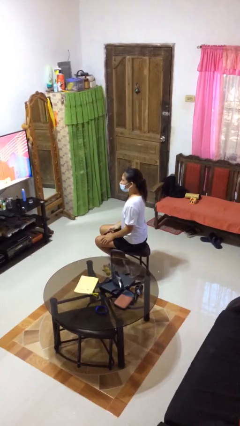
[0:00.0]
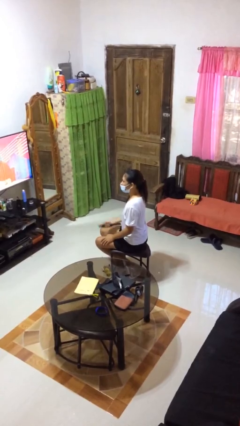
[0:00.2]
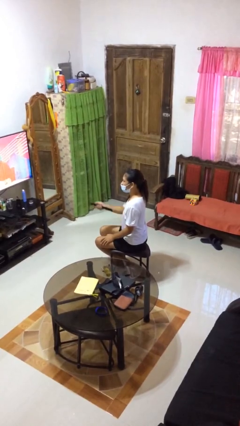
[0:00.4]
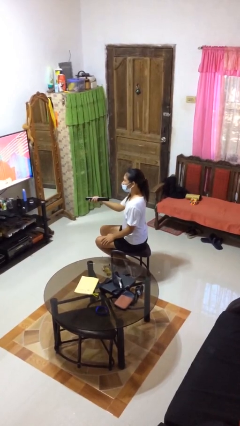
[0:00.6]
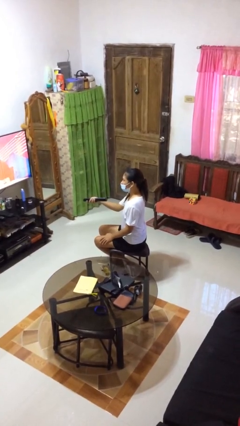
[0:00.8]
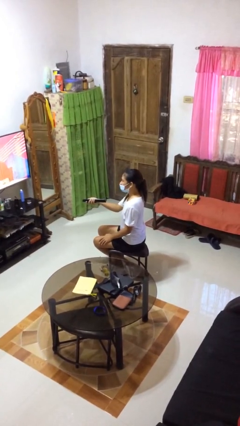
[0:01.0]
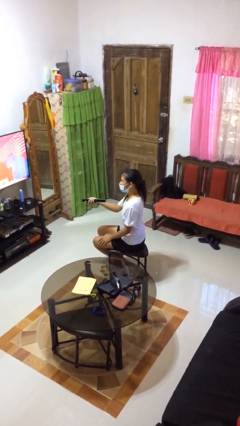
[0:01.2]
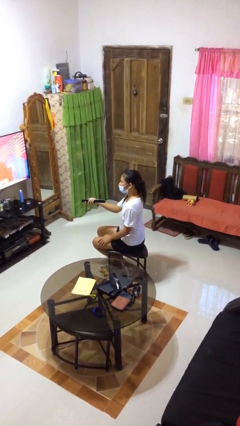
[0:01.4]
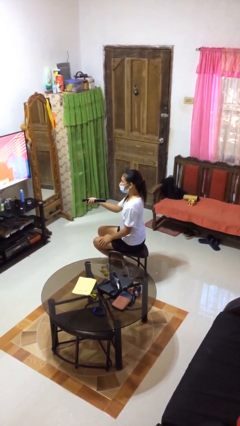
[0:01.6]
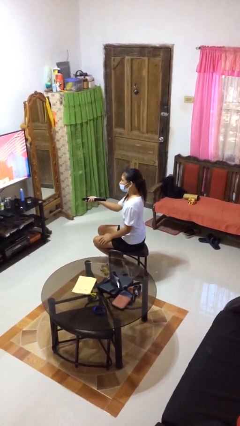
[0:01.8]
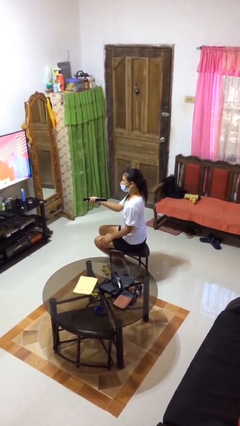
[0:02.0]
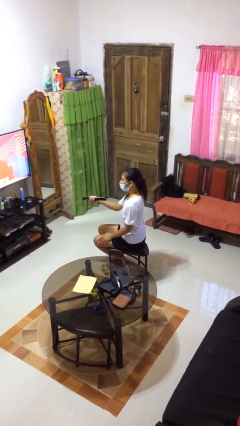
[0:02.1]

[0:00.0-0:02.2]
person uses television remote

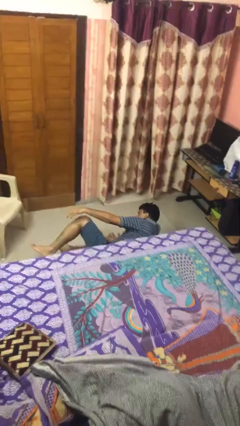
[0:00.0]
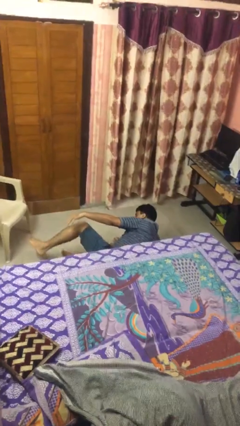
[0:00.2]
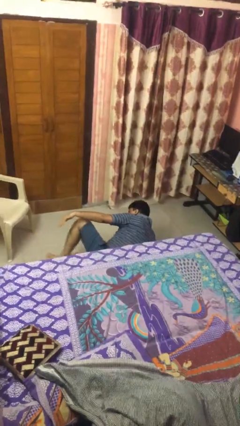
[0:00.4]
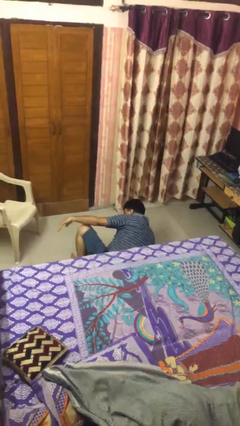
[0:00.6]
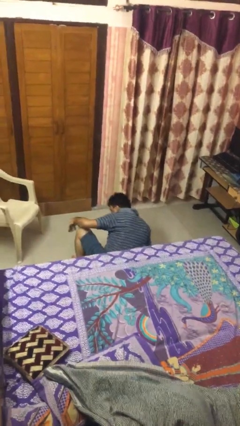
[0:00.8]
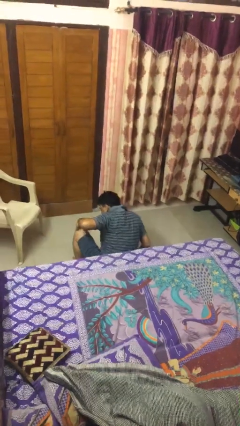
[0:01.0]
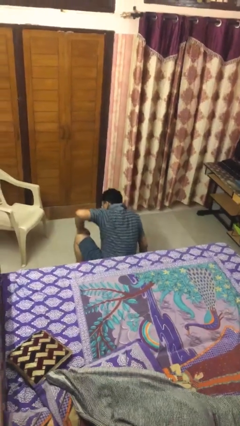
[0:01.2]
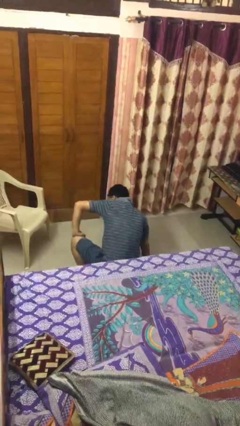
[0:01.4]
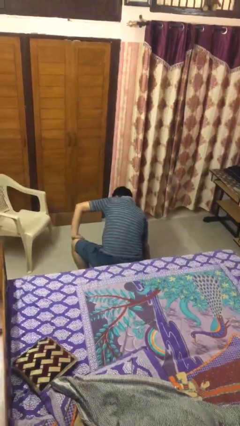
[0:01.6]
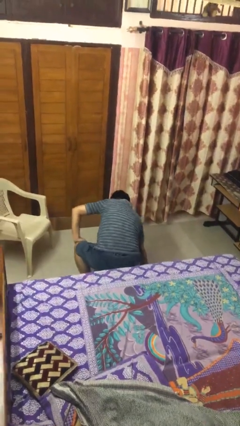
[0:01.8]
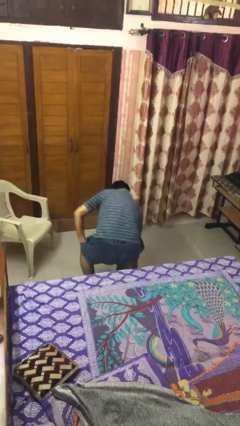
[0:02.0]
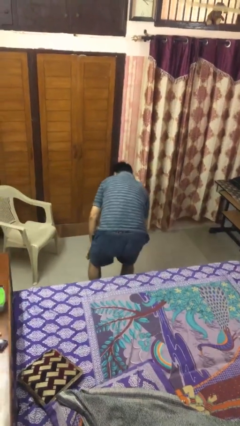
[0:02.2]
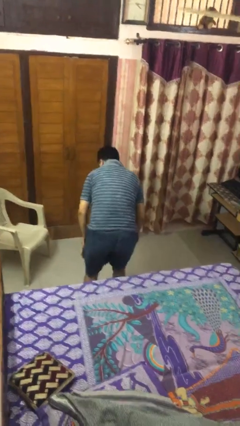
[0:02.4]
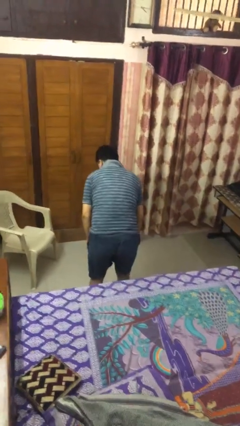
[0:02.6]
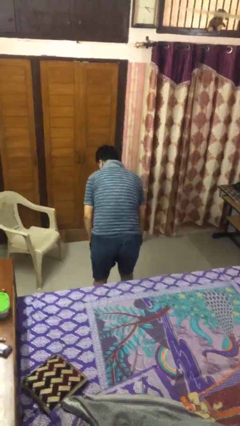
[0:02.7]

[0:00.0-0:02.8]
person stands up from floor

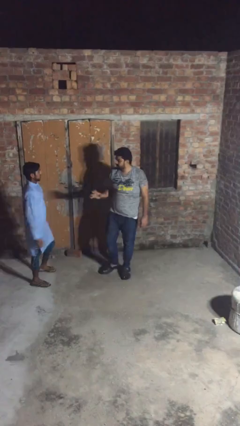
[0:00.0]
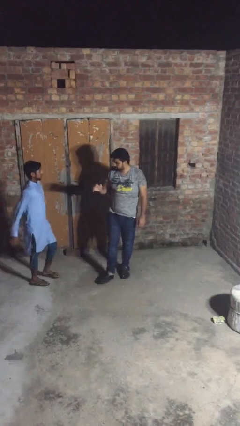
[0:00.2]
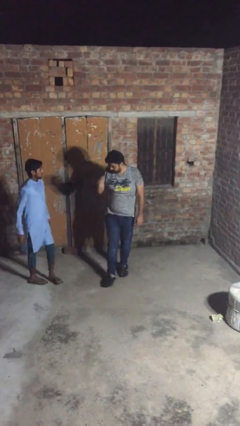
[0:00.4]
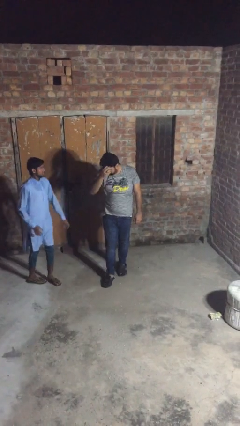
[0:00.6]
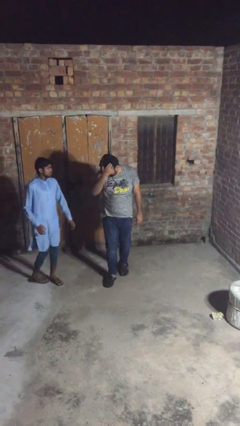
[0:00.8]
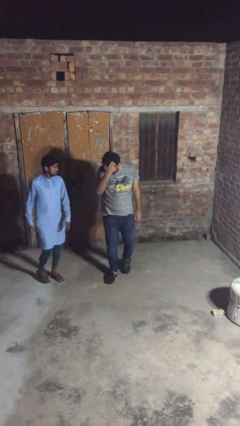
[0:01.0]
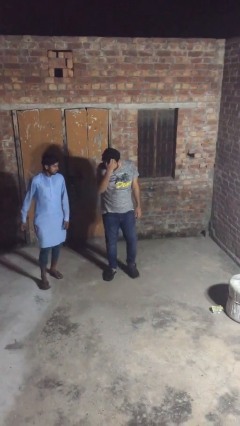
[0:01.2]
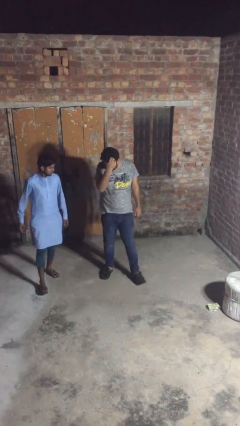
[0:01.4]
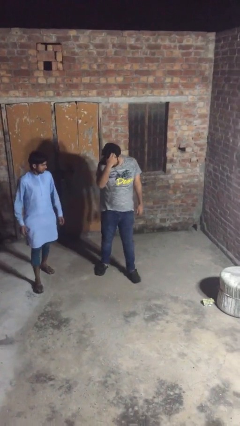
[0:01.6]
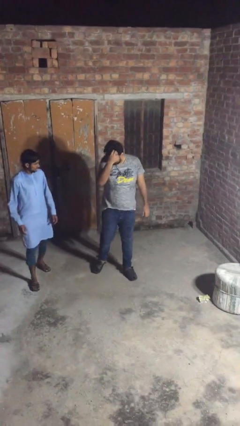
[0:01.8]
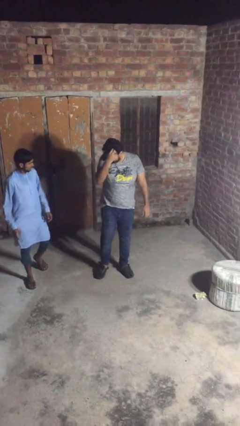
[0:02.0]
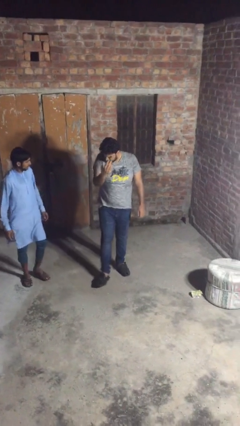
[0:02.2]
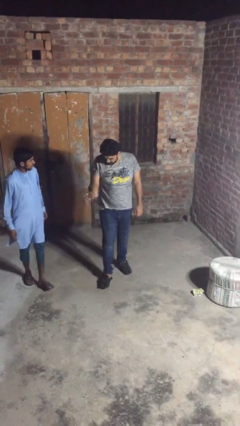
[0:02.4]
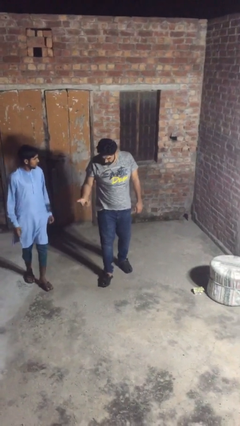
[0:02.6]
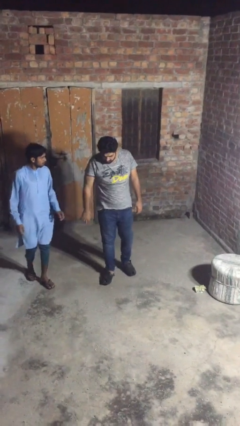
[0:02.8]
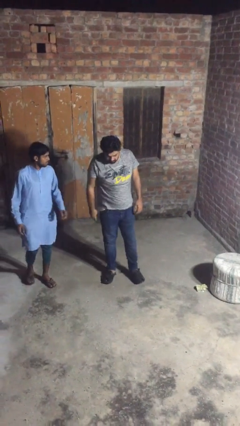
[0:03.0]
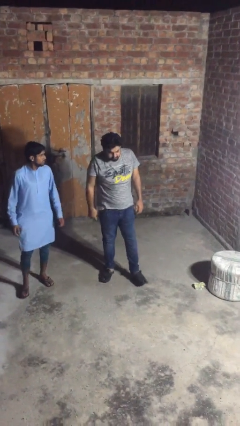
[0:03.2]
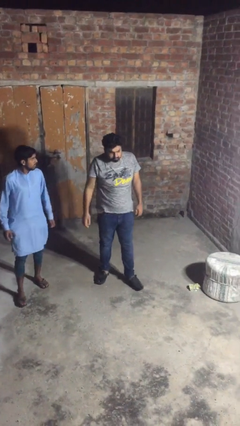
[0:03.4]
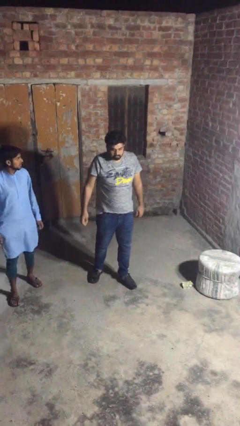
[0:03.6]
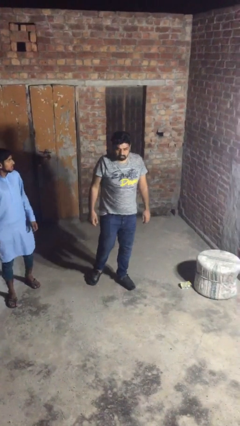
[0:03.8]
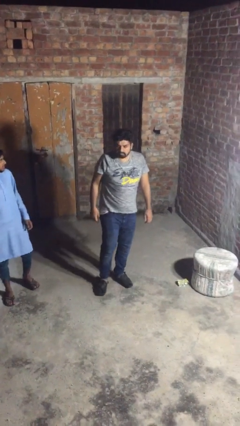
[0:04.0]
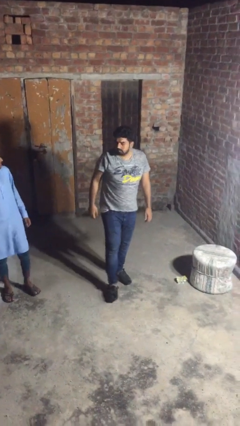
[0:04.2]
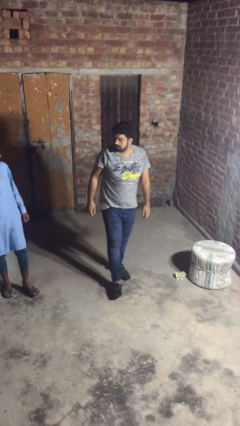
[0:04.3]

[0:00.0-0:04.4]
person talks to person

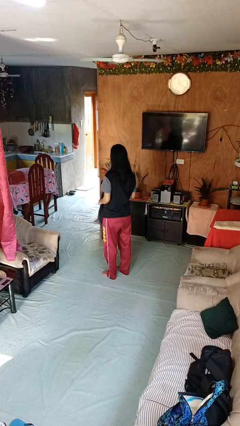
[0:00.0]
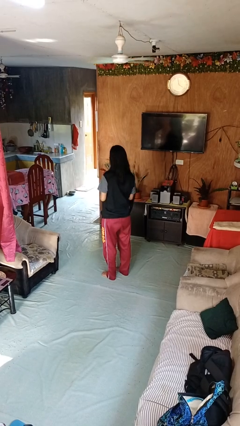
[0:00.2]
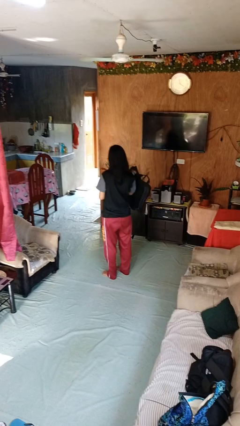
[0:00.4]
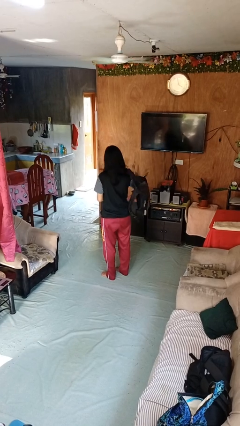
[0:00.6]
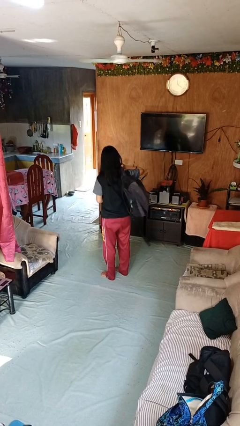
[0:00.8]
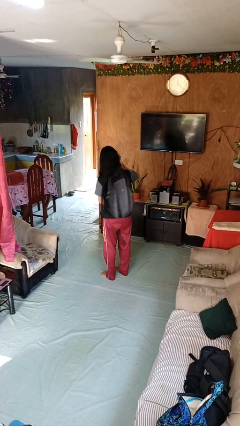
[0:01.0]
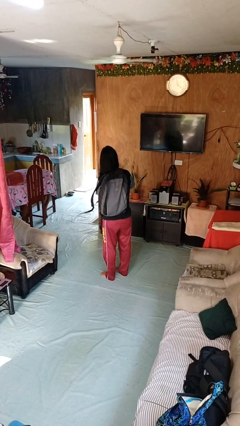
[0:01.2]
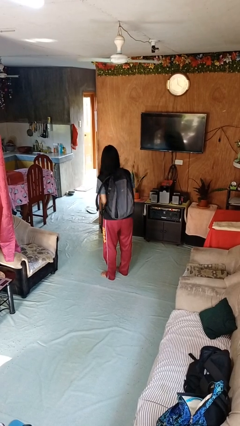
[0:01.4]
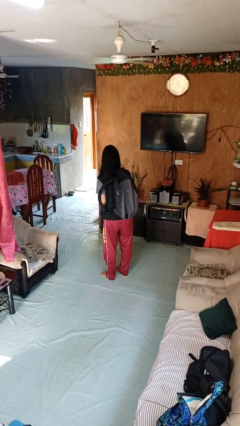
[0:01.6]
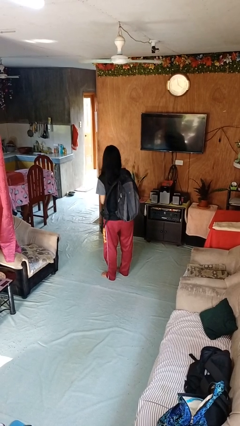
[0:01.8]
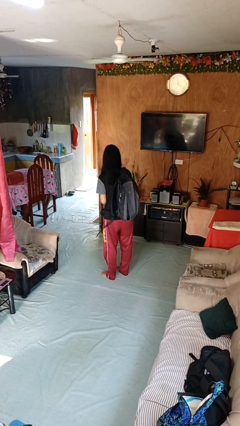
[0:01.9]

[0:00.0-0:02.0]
person puts on backpack

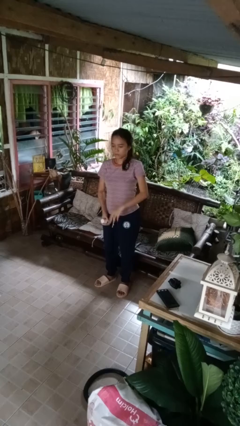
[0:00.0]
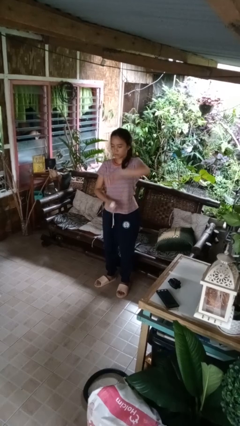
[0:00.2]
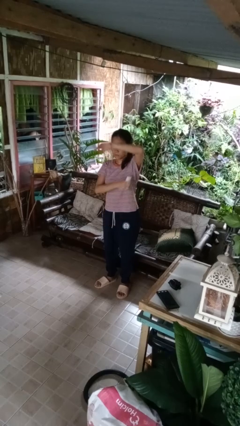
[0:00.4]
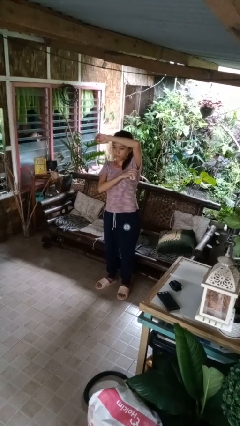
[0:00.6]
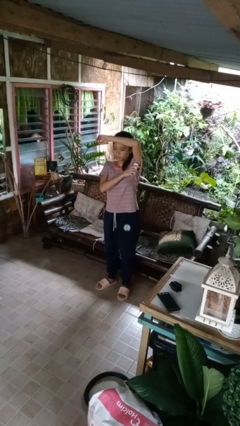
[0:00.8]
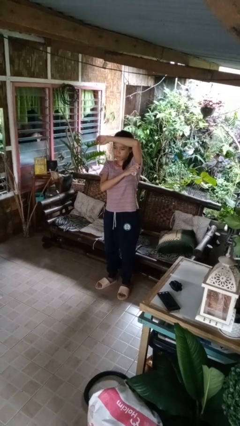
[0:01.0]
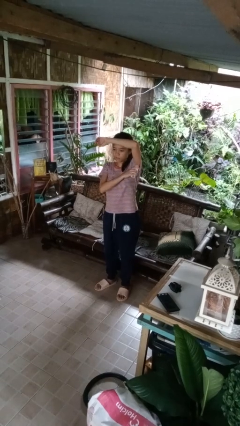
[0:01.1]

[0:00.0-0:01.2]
person applies deodorant

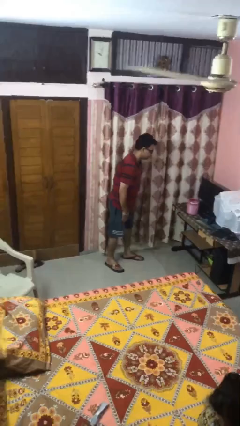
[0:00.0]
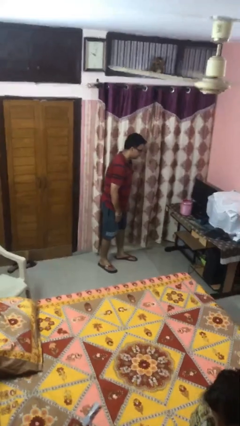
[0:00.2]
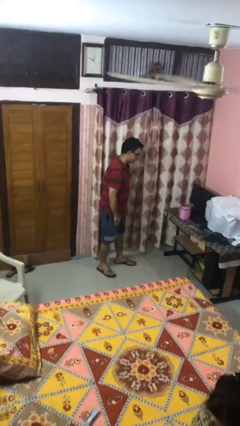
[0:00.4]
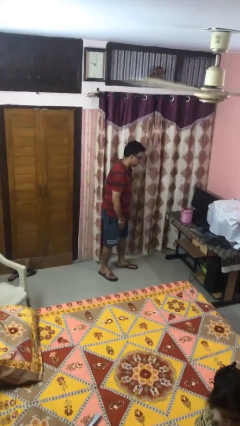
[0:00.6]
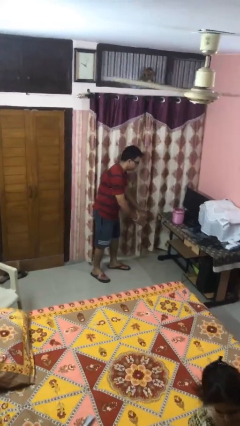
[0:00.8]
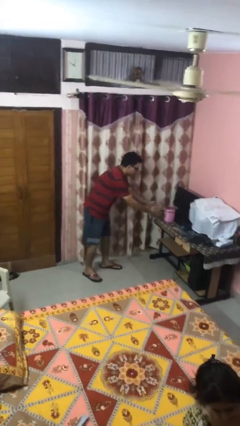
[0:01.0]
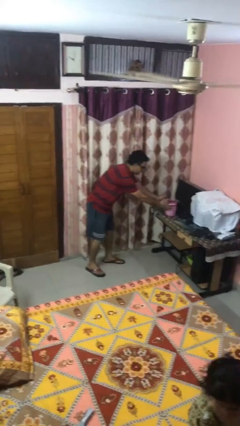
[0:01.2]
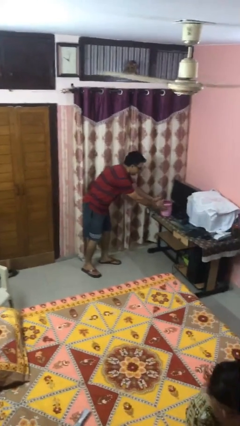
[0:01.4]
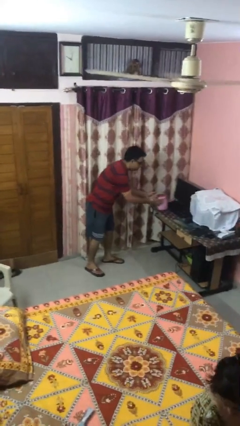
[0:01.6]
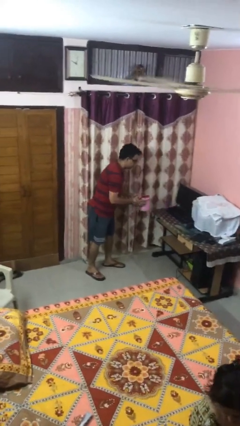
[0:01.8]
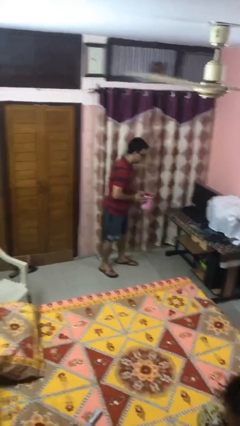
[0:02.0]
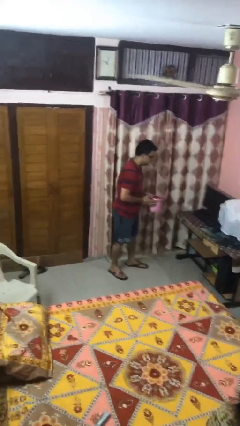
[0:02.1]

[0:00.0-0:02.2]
person picks up object from countertop

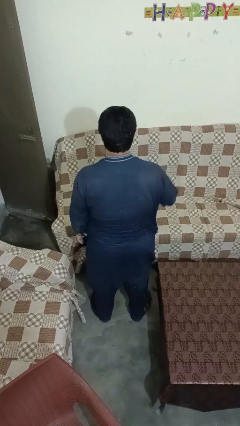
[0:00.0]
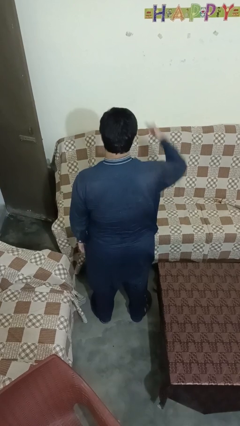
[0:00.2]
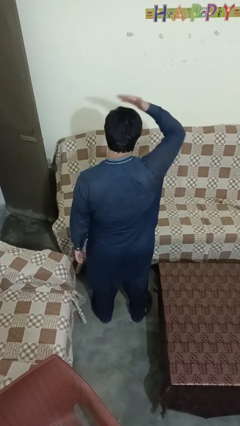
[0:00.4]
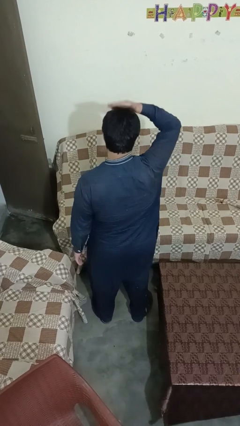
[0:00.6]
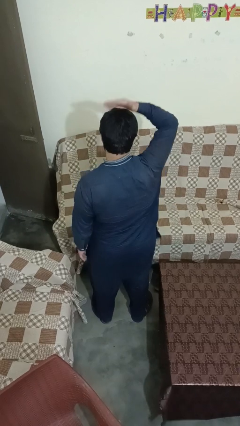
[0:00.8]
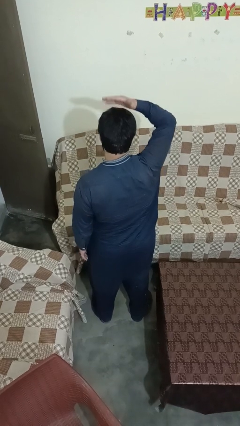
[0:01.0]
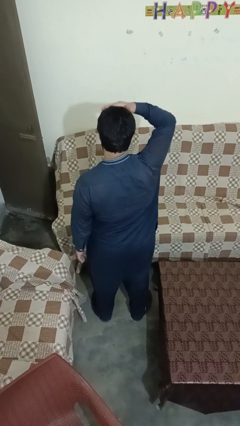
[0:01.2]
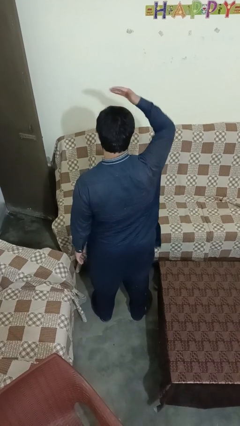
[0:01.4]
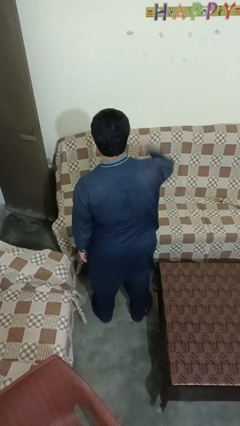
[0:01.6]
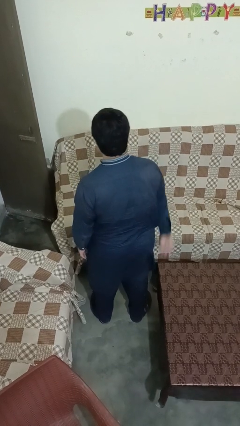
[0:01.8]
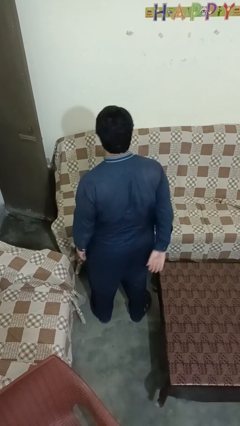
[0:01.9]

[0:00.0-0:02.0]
person pats head
